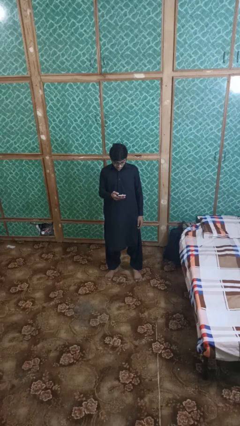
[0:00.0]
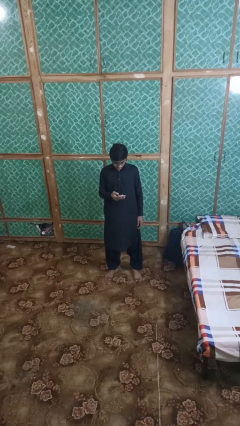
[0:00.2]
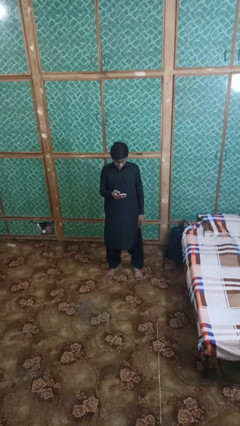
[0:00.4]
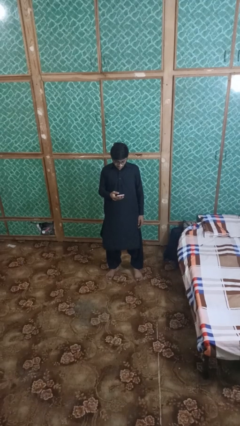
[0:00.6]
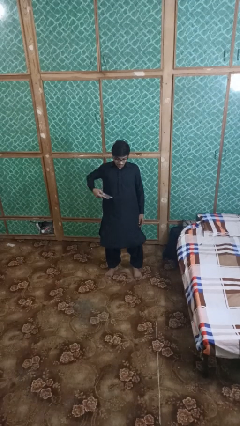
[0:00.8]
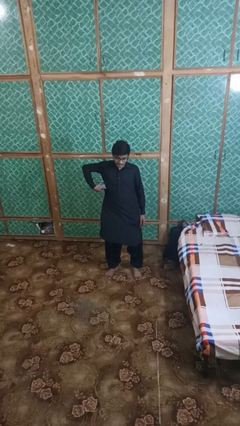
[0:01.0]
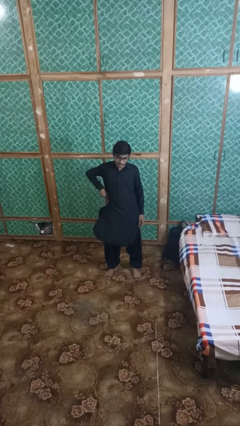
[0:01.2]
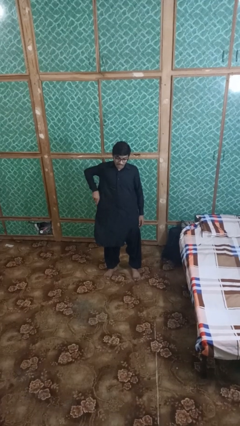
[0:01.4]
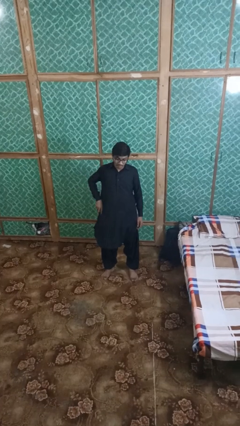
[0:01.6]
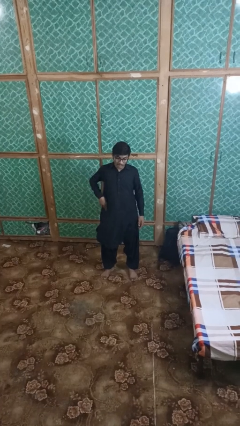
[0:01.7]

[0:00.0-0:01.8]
person puts phone into pocket

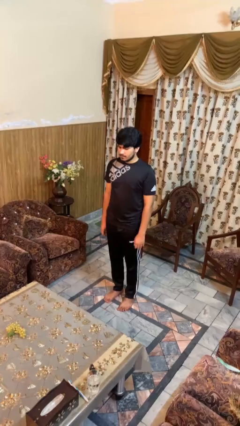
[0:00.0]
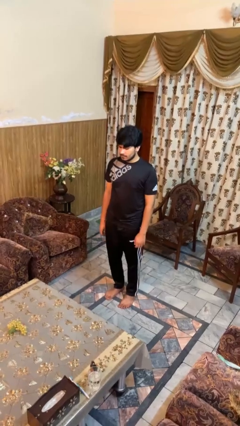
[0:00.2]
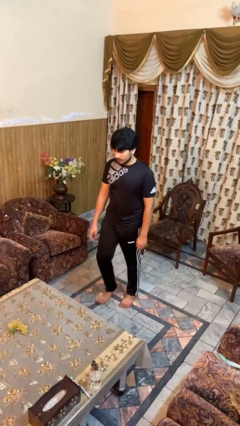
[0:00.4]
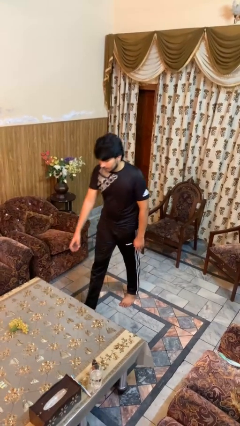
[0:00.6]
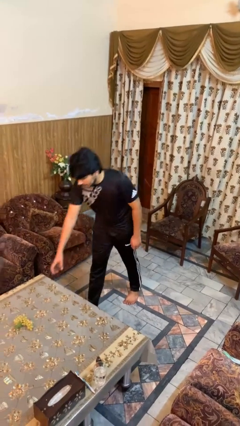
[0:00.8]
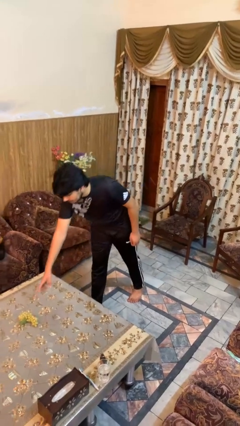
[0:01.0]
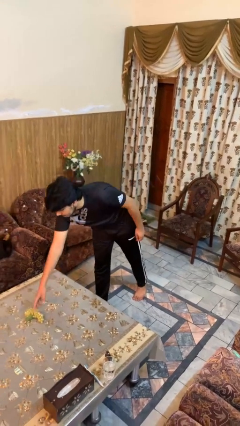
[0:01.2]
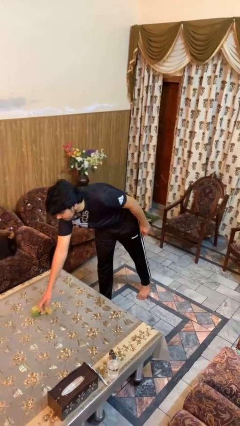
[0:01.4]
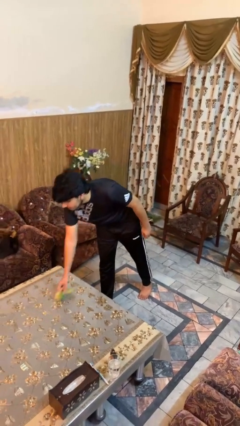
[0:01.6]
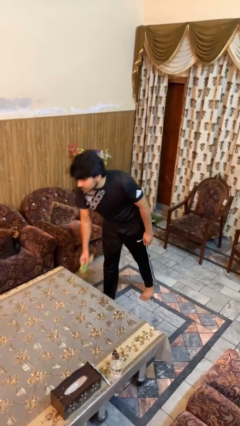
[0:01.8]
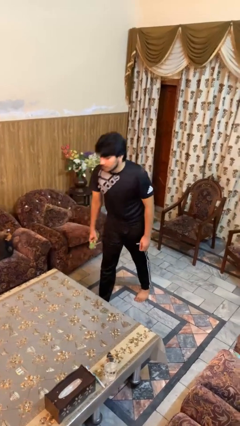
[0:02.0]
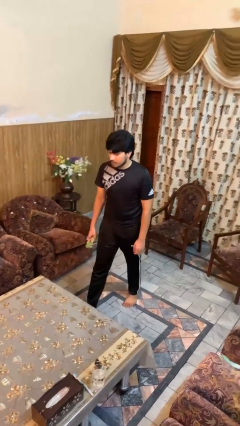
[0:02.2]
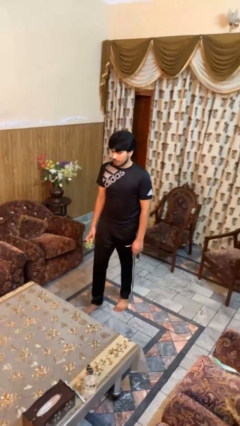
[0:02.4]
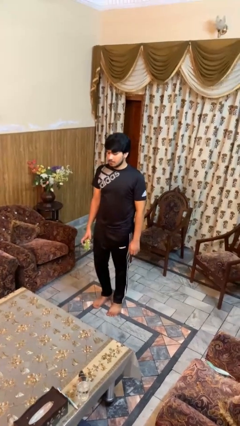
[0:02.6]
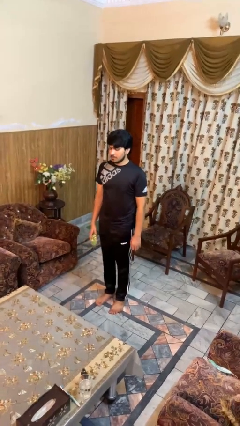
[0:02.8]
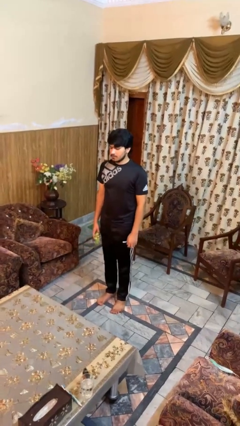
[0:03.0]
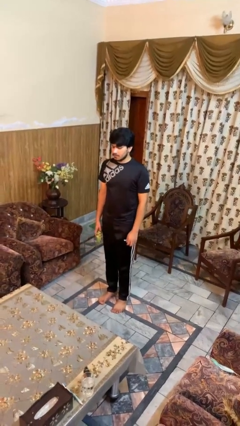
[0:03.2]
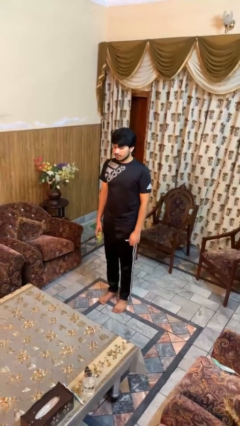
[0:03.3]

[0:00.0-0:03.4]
person picks up object from table

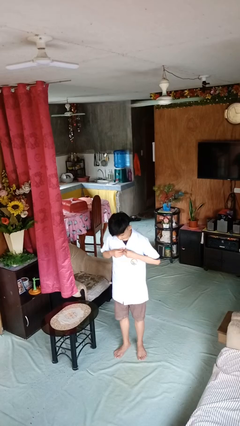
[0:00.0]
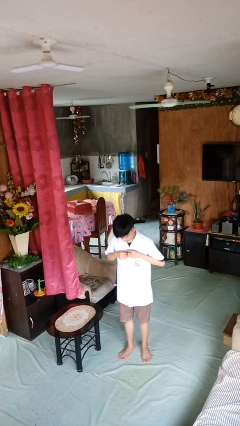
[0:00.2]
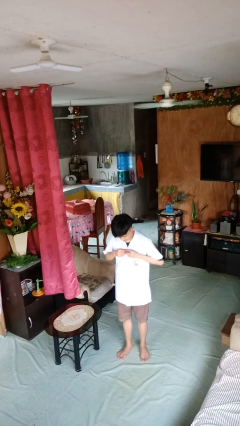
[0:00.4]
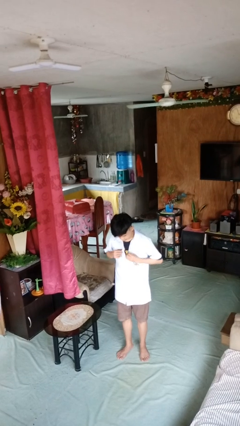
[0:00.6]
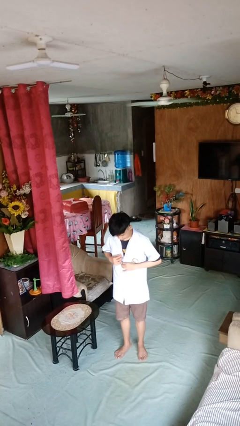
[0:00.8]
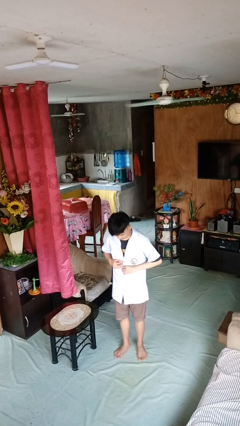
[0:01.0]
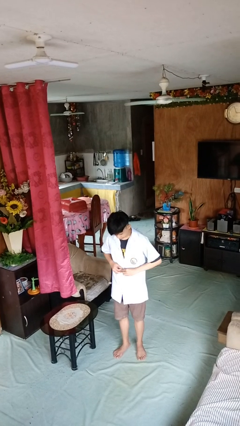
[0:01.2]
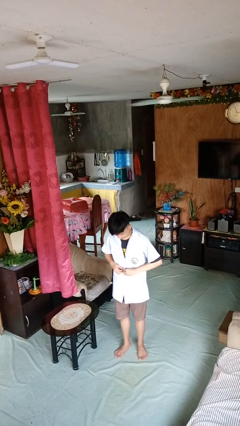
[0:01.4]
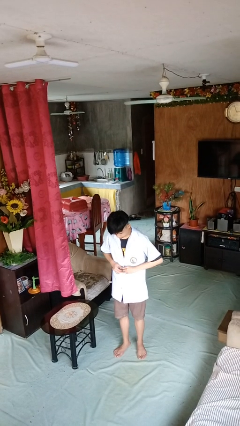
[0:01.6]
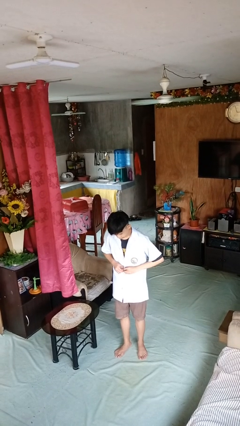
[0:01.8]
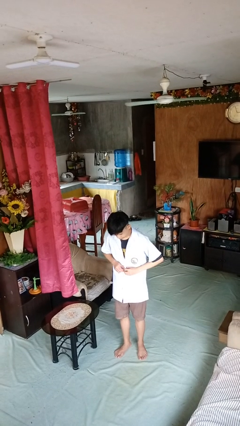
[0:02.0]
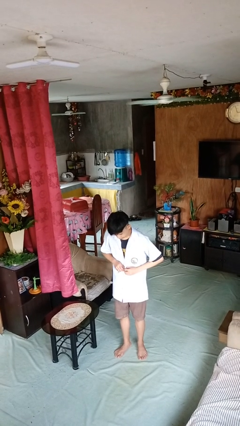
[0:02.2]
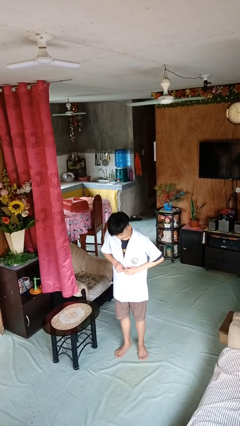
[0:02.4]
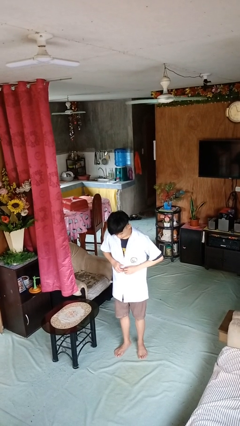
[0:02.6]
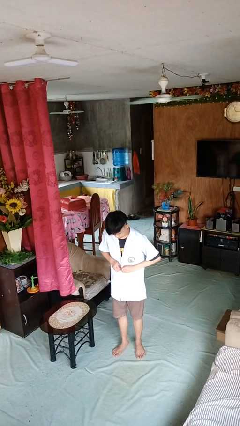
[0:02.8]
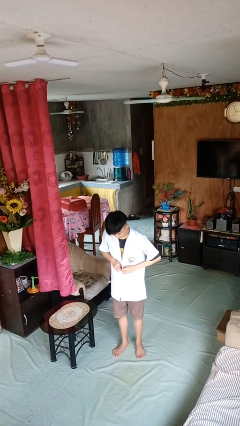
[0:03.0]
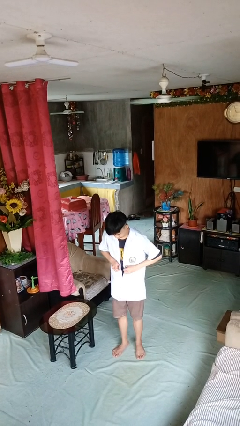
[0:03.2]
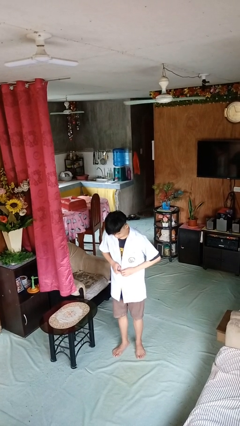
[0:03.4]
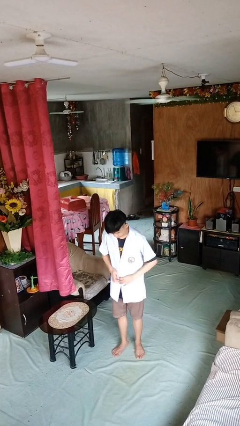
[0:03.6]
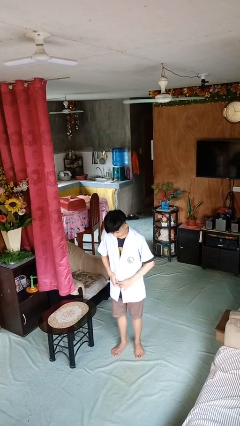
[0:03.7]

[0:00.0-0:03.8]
person unbuttons shirt

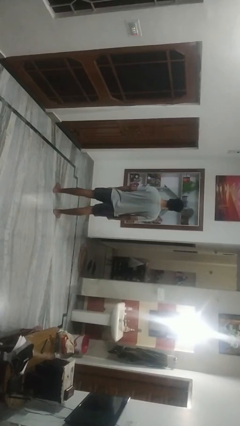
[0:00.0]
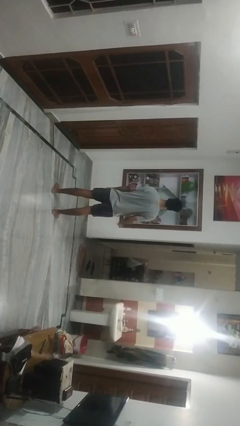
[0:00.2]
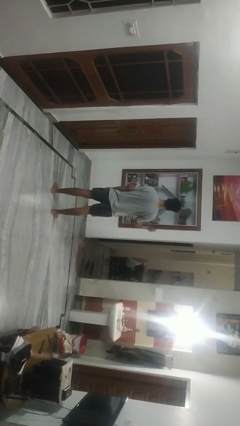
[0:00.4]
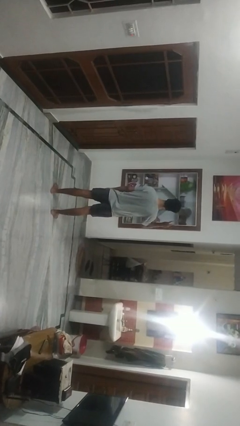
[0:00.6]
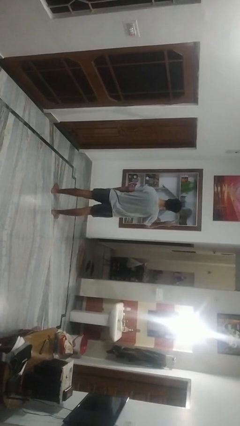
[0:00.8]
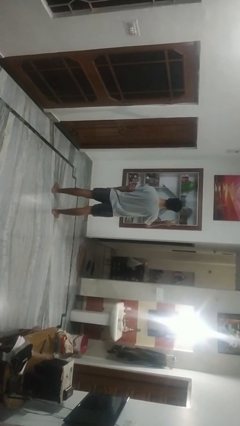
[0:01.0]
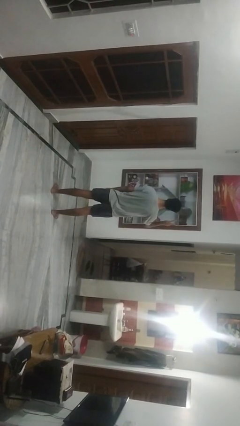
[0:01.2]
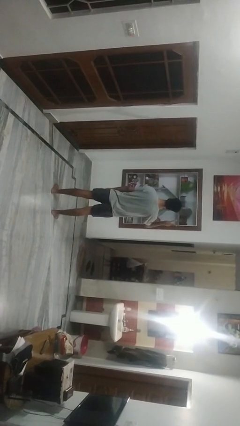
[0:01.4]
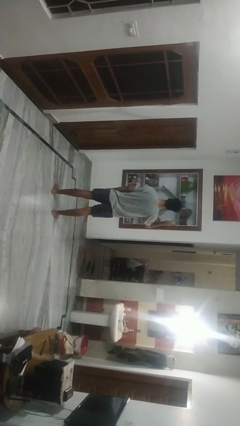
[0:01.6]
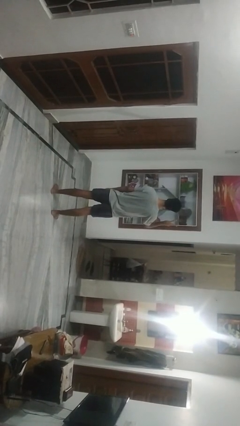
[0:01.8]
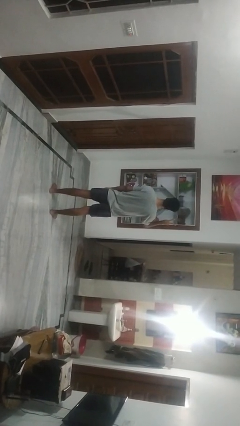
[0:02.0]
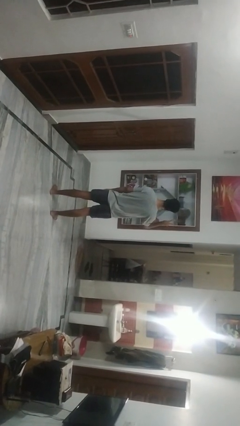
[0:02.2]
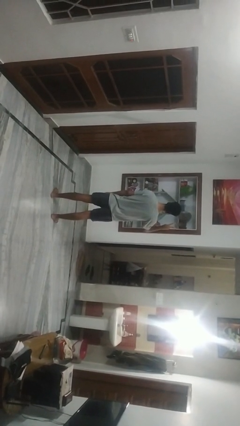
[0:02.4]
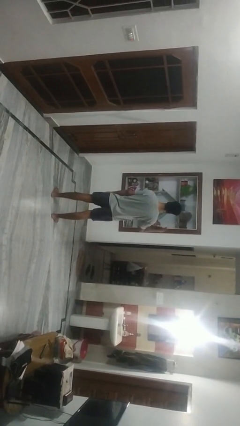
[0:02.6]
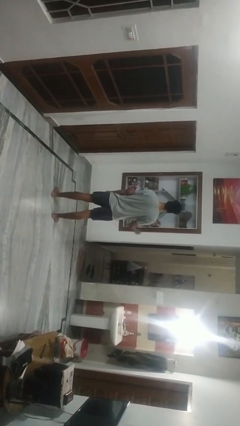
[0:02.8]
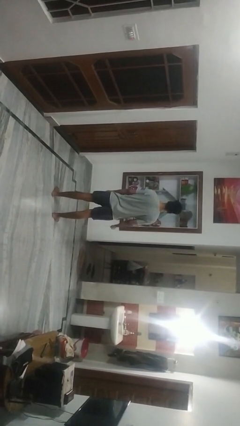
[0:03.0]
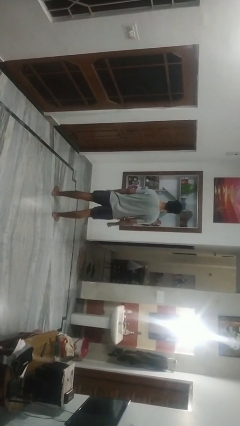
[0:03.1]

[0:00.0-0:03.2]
person gestures peace

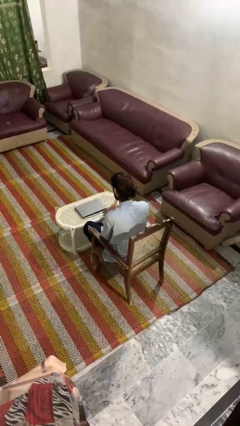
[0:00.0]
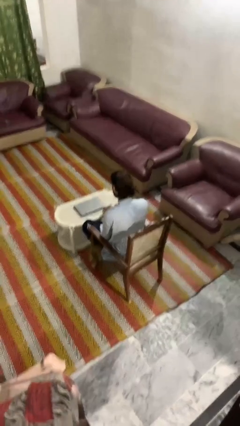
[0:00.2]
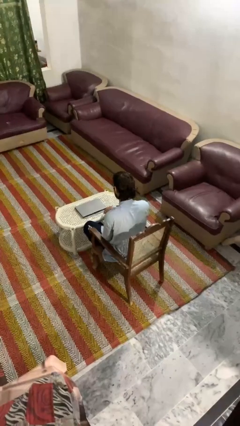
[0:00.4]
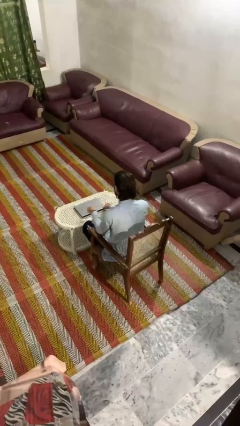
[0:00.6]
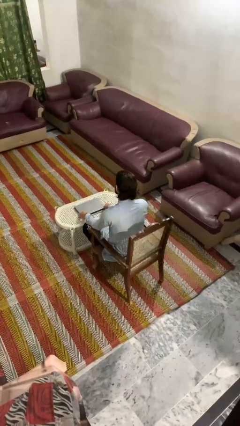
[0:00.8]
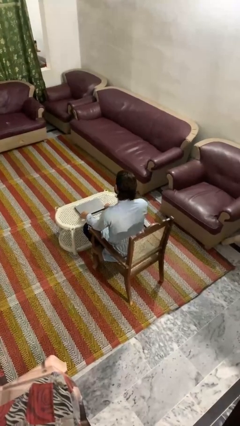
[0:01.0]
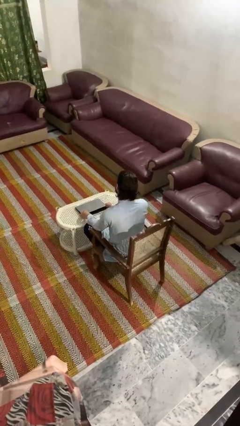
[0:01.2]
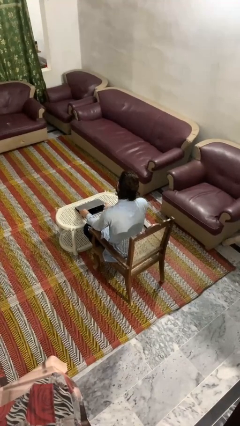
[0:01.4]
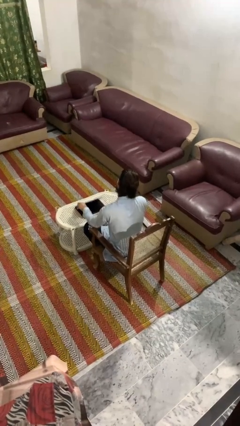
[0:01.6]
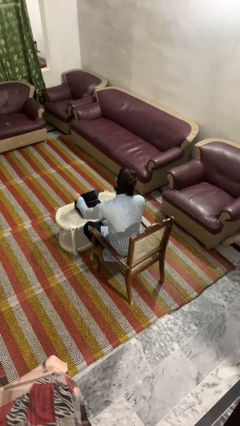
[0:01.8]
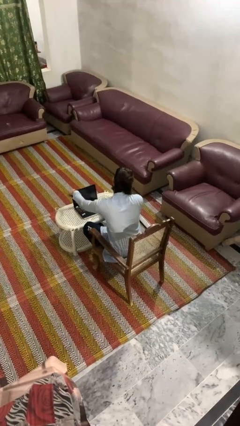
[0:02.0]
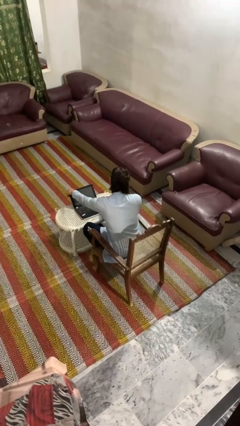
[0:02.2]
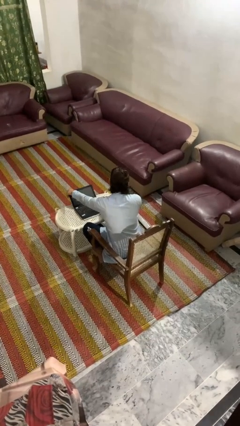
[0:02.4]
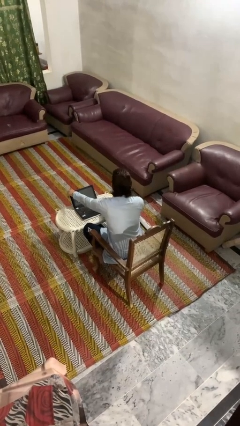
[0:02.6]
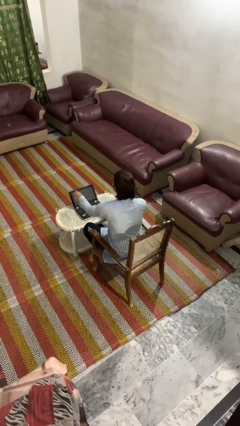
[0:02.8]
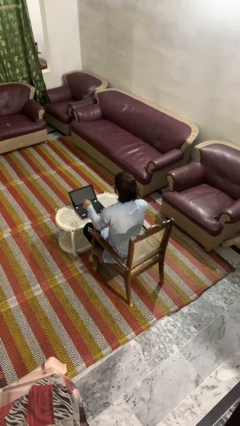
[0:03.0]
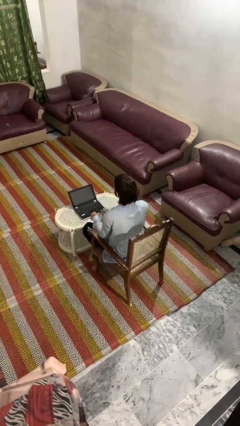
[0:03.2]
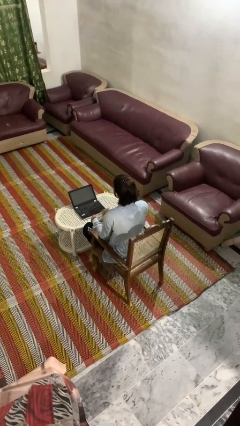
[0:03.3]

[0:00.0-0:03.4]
person opens laptop

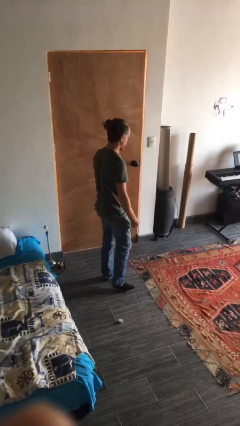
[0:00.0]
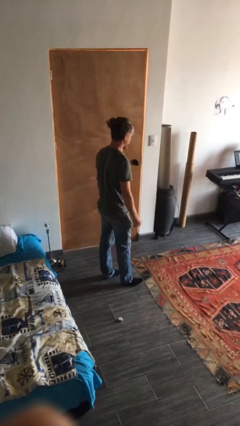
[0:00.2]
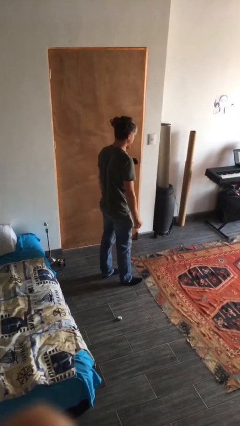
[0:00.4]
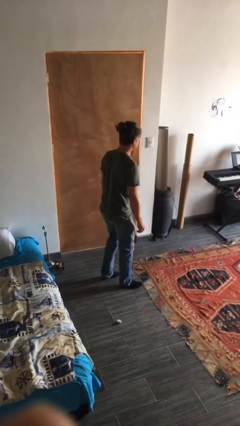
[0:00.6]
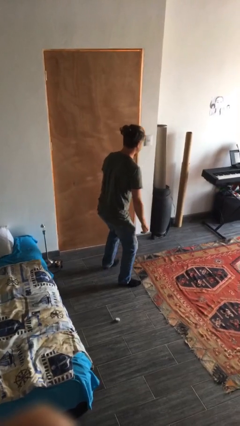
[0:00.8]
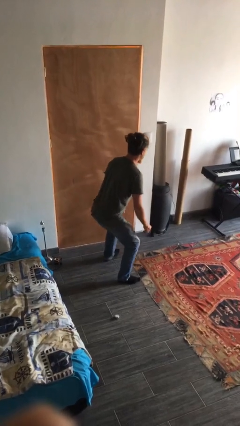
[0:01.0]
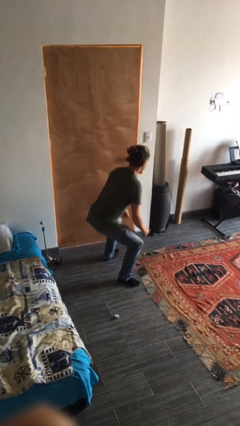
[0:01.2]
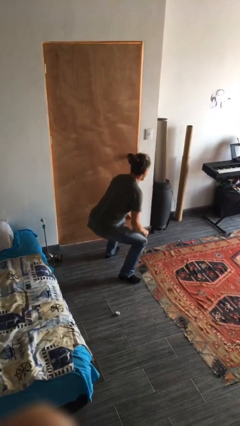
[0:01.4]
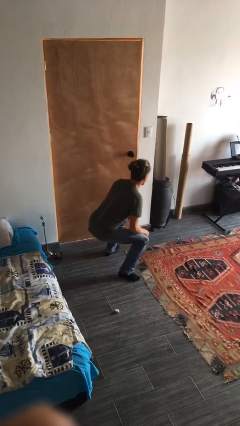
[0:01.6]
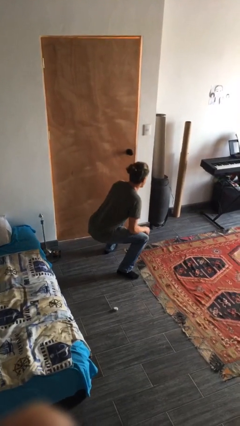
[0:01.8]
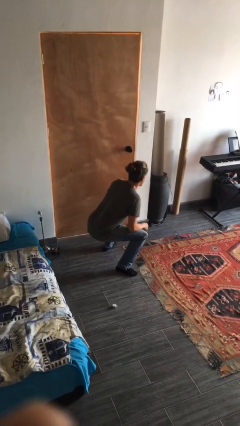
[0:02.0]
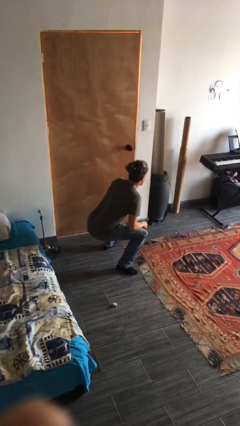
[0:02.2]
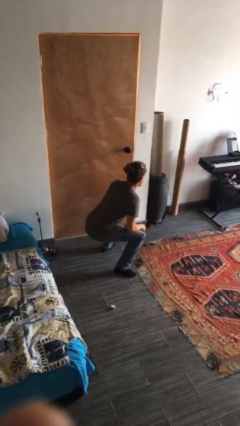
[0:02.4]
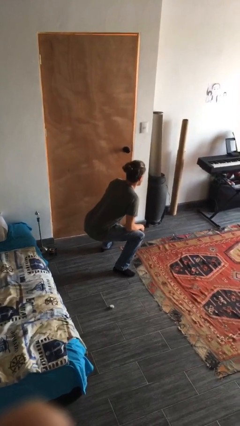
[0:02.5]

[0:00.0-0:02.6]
person squats
